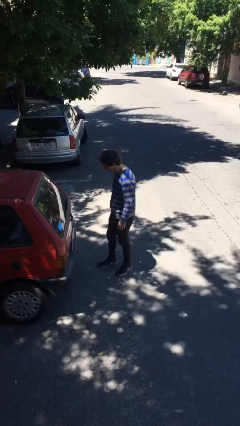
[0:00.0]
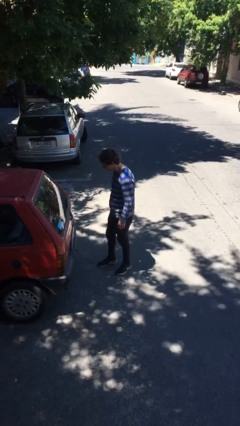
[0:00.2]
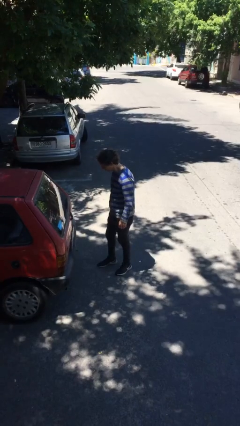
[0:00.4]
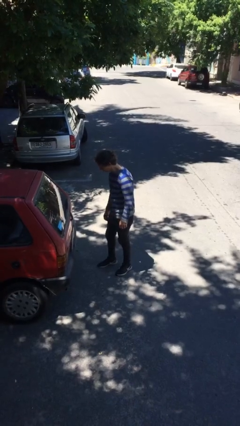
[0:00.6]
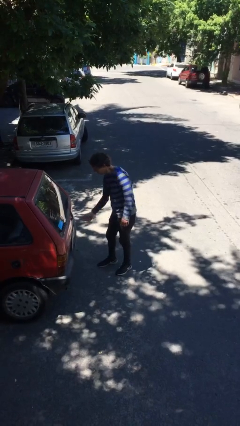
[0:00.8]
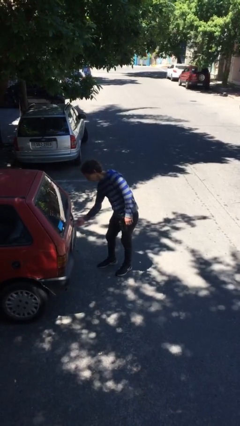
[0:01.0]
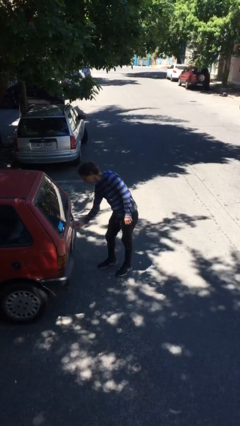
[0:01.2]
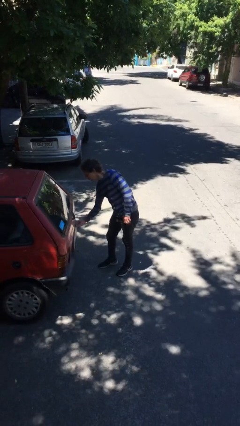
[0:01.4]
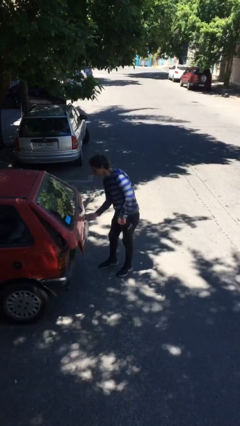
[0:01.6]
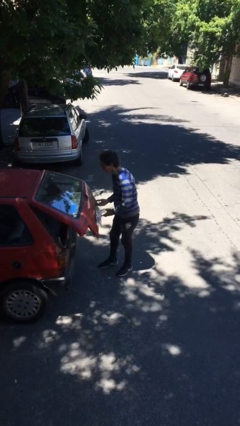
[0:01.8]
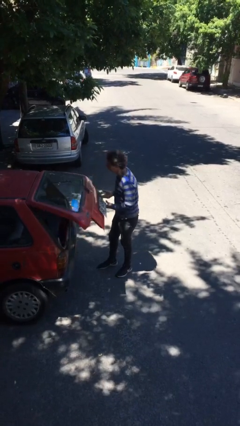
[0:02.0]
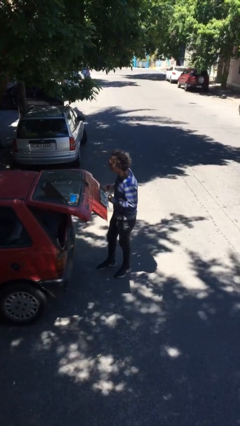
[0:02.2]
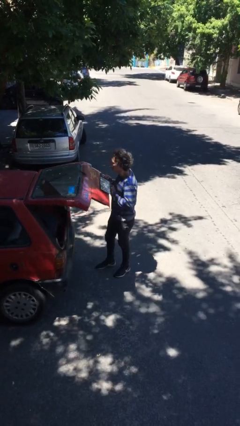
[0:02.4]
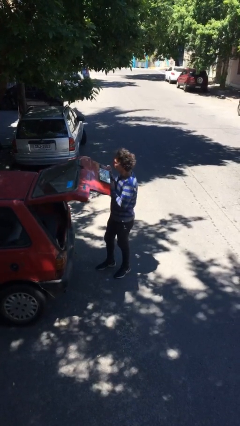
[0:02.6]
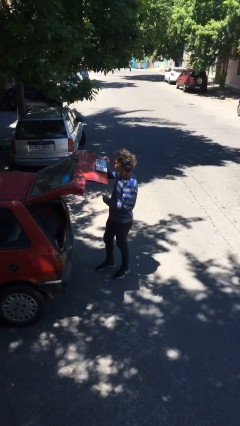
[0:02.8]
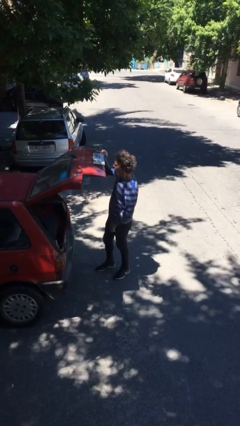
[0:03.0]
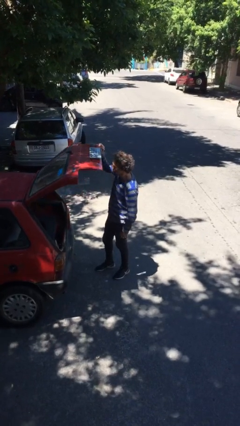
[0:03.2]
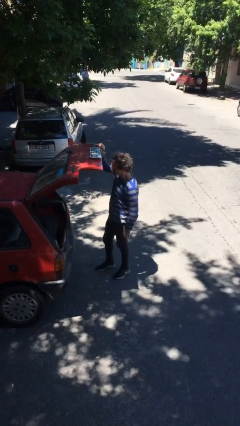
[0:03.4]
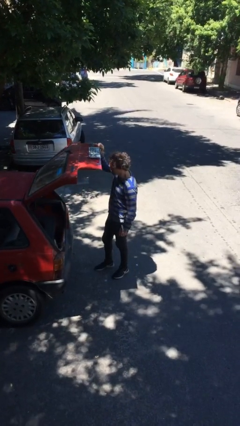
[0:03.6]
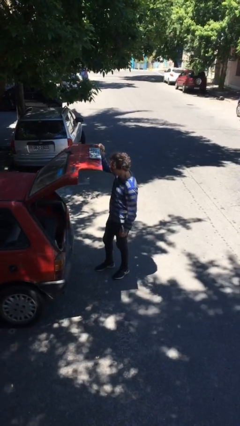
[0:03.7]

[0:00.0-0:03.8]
person opens car trunk

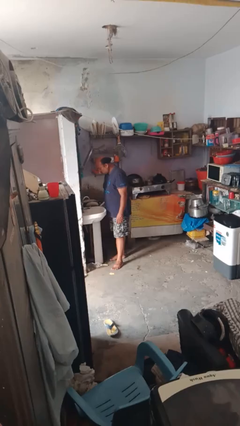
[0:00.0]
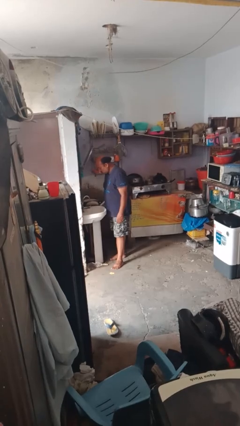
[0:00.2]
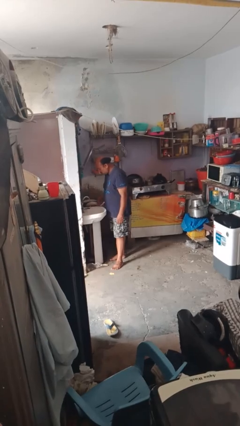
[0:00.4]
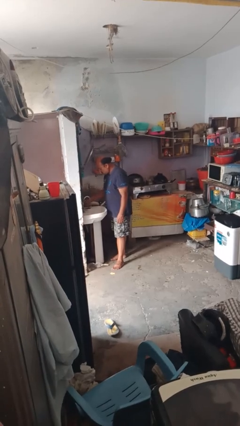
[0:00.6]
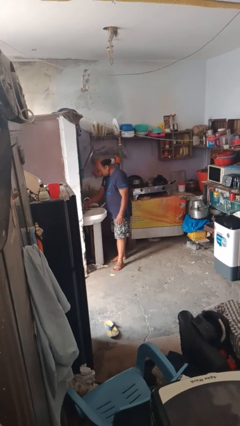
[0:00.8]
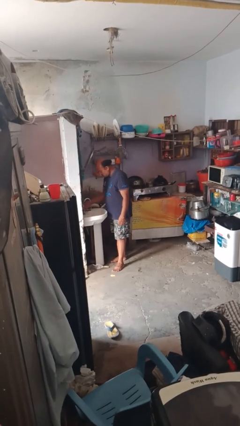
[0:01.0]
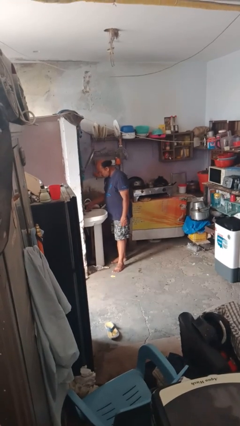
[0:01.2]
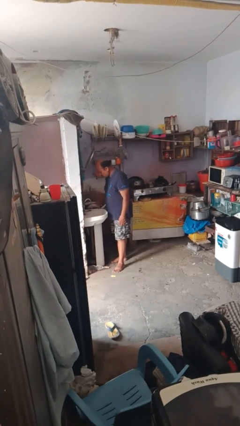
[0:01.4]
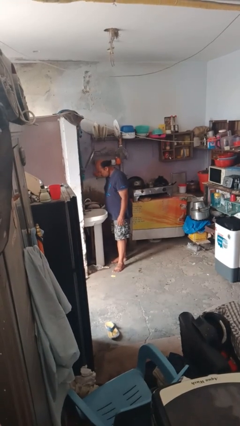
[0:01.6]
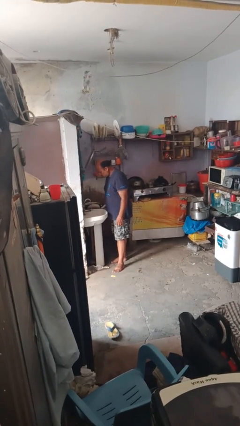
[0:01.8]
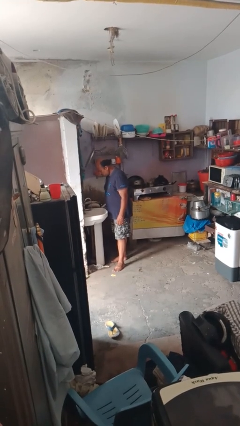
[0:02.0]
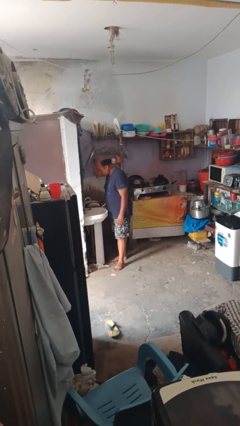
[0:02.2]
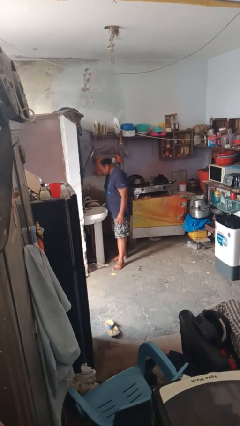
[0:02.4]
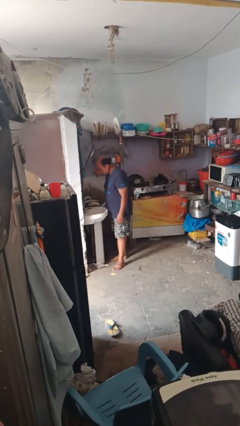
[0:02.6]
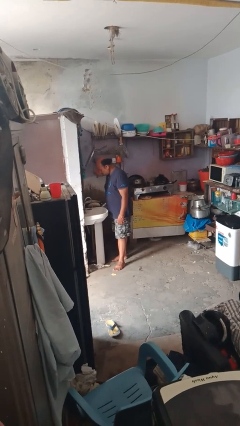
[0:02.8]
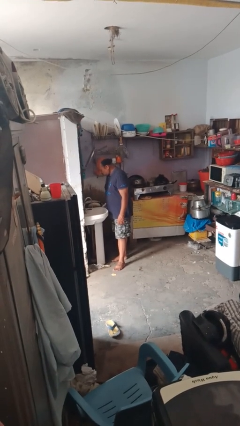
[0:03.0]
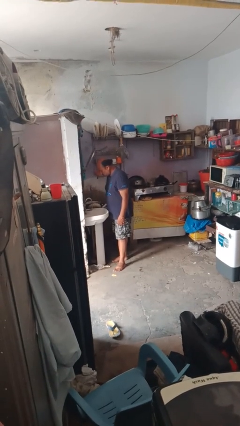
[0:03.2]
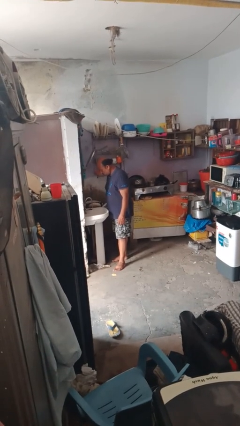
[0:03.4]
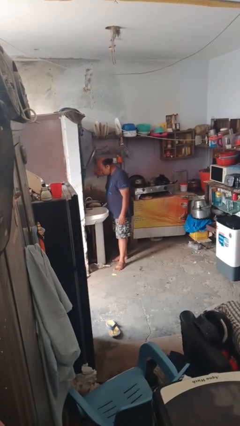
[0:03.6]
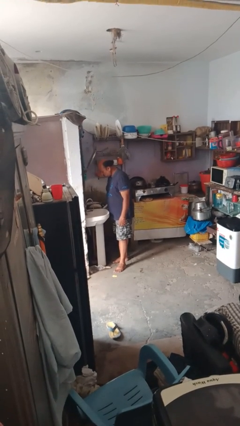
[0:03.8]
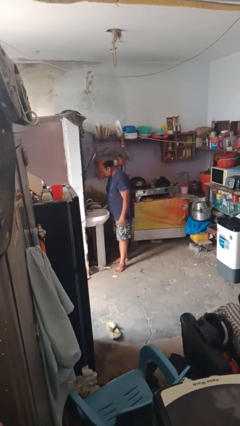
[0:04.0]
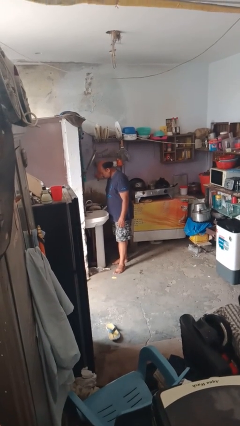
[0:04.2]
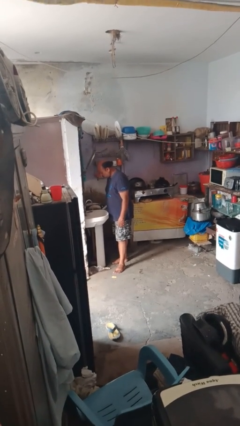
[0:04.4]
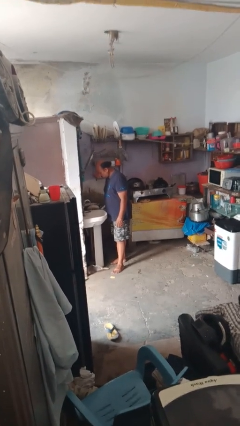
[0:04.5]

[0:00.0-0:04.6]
person turns on faucet

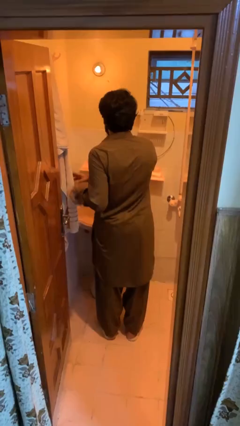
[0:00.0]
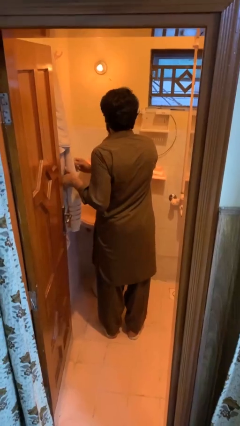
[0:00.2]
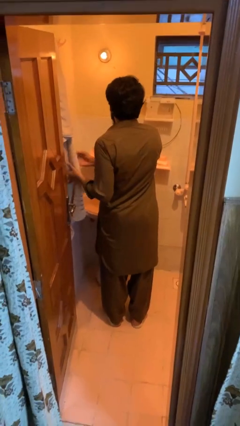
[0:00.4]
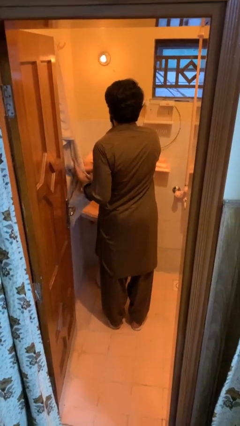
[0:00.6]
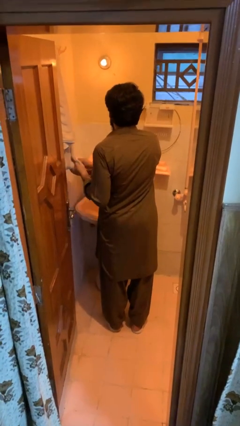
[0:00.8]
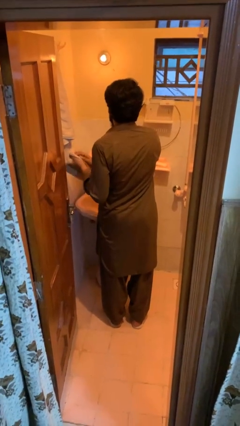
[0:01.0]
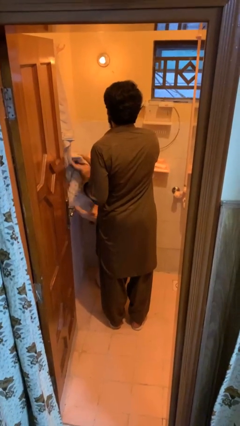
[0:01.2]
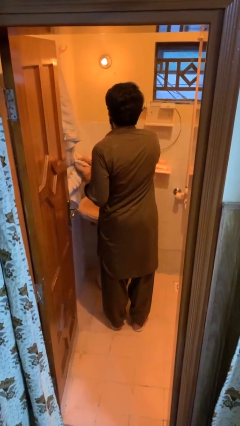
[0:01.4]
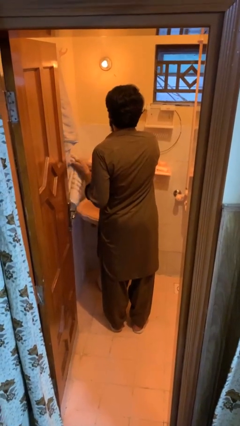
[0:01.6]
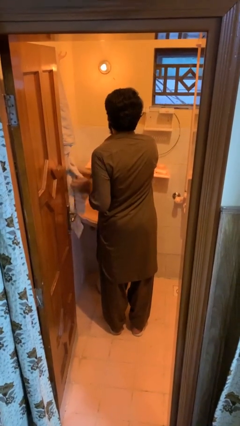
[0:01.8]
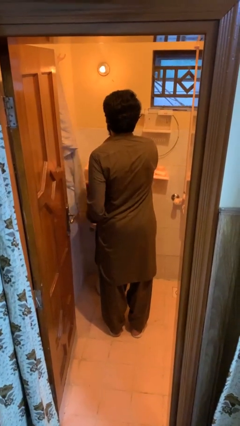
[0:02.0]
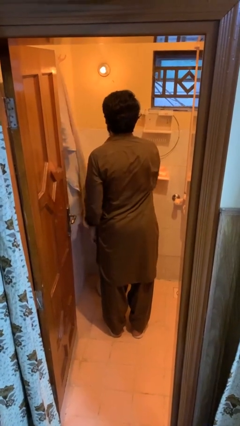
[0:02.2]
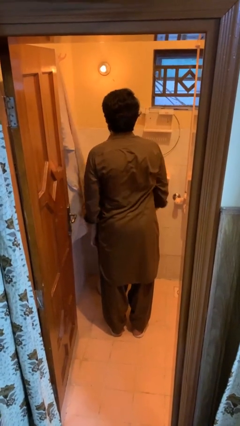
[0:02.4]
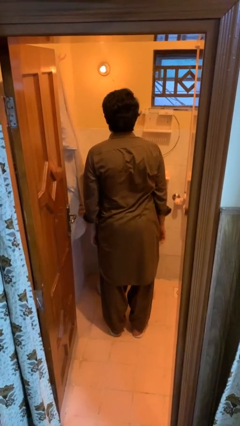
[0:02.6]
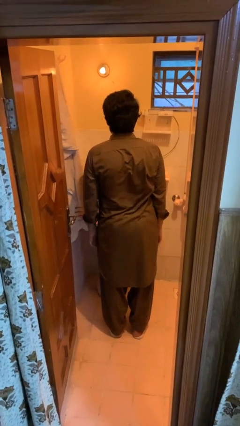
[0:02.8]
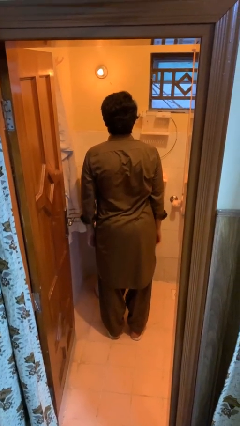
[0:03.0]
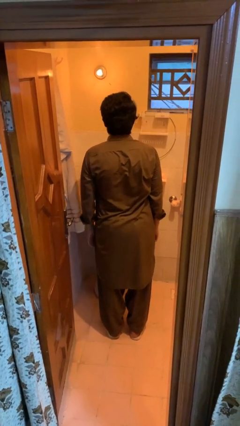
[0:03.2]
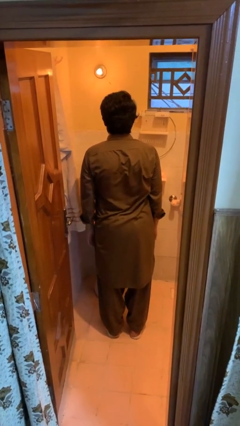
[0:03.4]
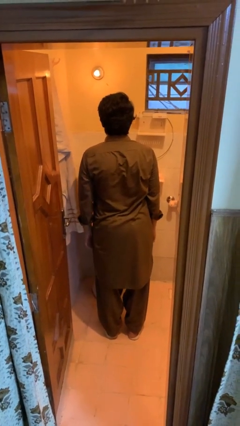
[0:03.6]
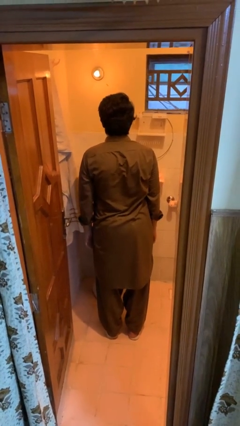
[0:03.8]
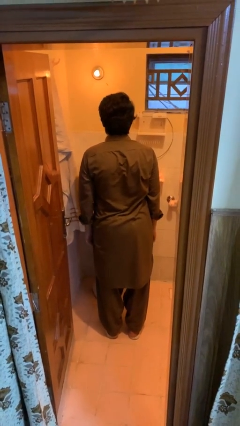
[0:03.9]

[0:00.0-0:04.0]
person dries hands with towel

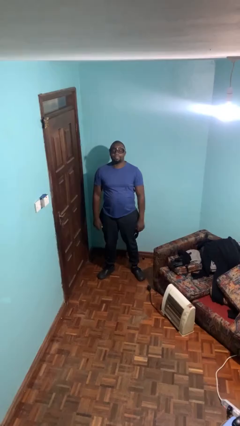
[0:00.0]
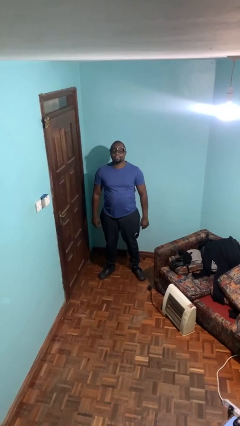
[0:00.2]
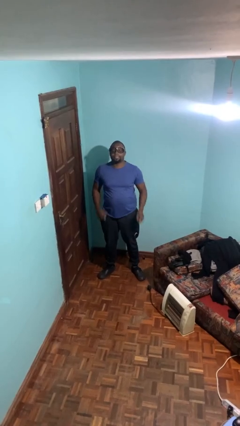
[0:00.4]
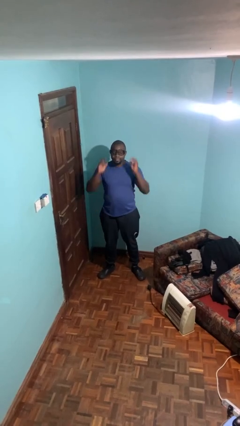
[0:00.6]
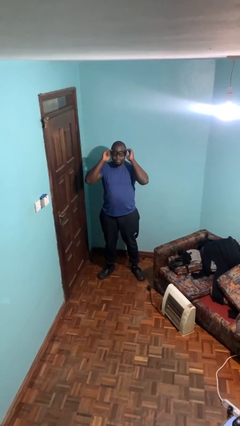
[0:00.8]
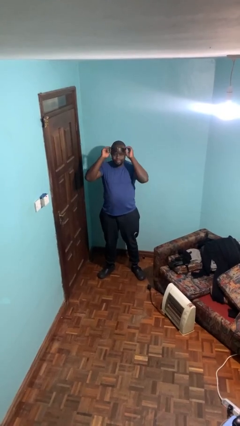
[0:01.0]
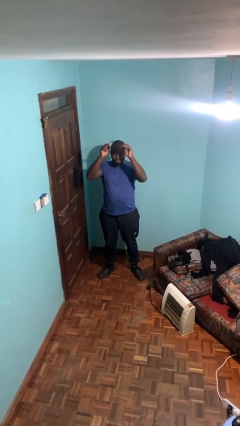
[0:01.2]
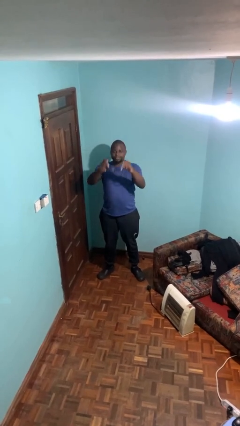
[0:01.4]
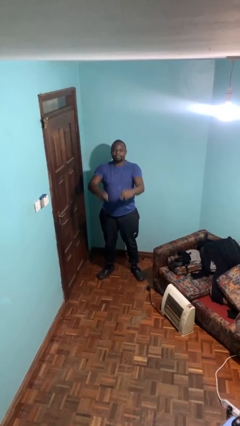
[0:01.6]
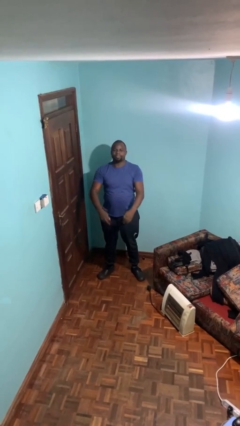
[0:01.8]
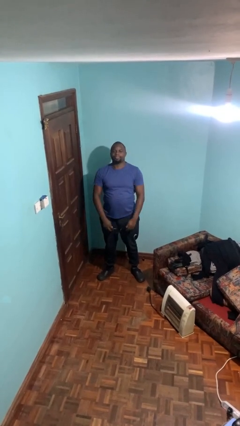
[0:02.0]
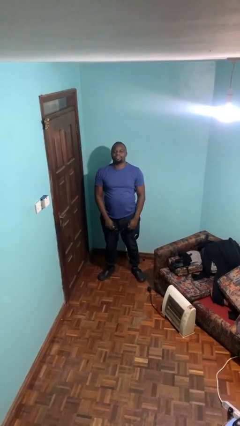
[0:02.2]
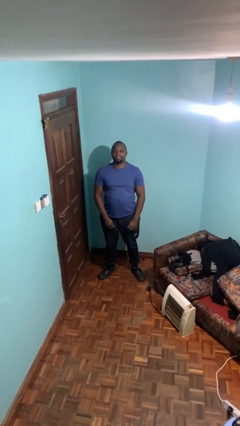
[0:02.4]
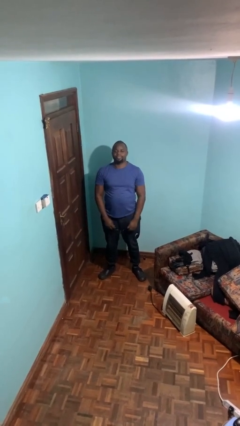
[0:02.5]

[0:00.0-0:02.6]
person takes off glasses

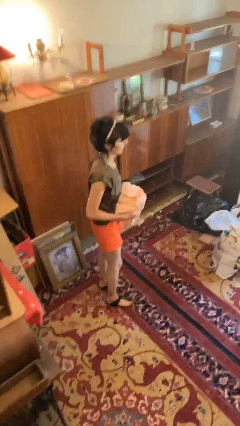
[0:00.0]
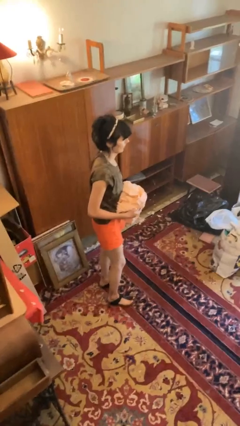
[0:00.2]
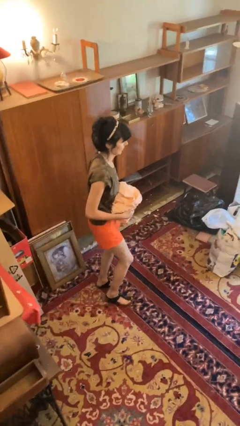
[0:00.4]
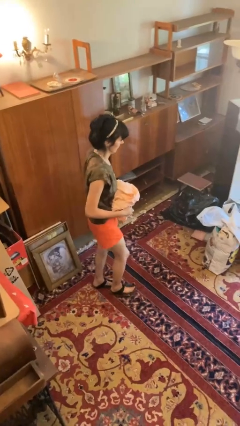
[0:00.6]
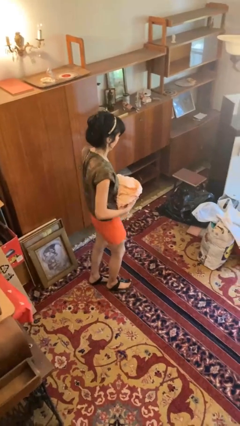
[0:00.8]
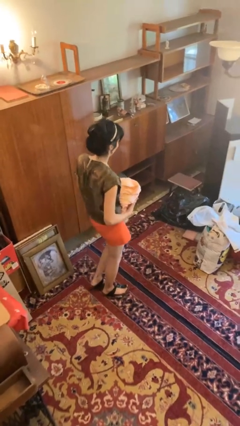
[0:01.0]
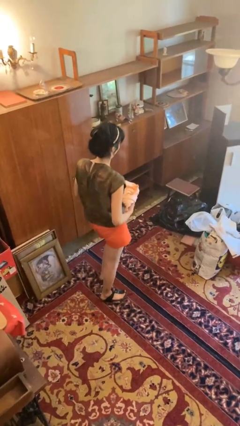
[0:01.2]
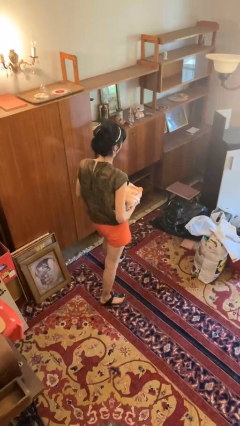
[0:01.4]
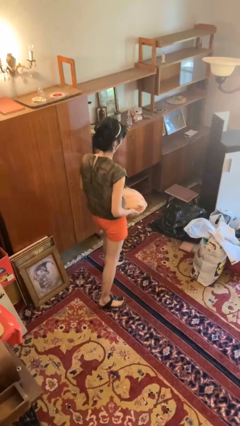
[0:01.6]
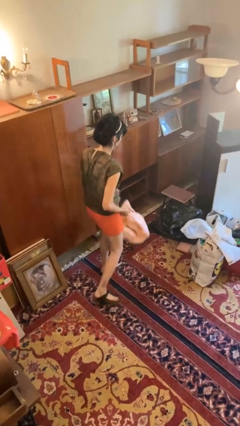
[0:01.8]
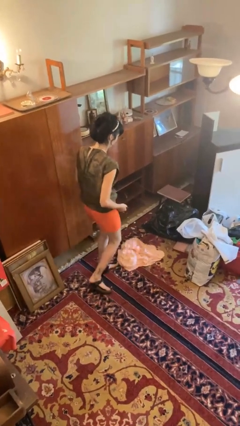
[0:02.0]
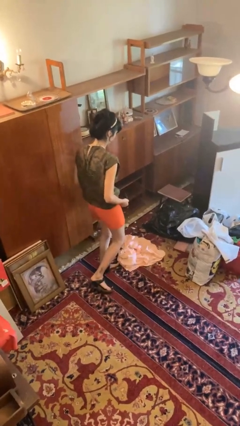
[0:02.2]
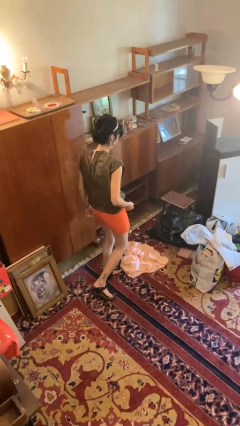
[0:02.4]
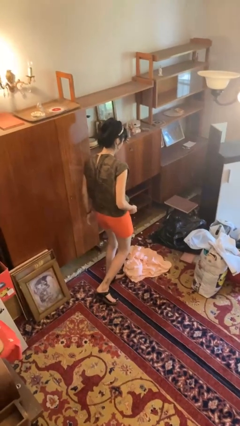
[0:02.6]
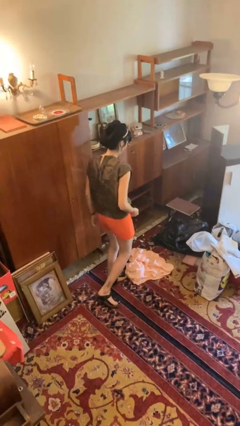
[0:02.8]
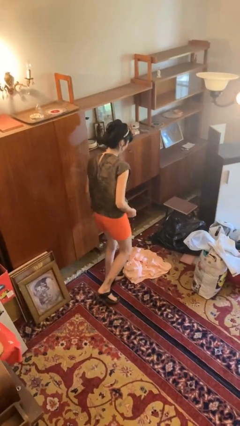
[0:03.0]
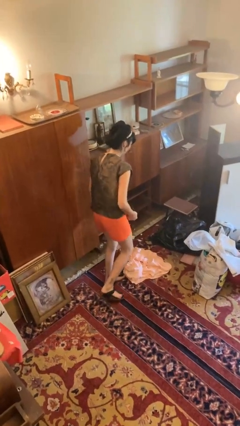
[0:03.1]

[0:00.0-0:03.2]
person drops object
